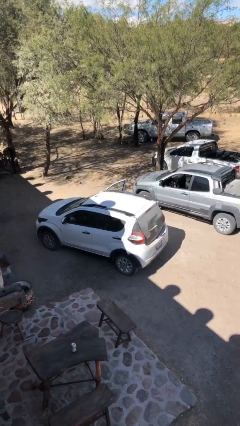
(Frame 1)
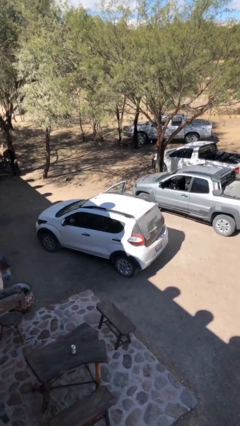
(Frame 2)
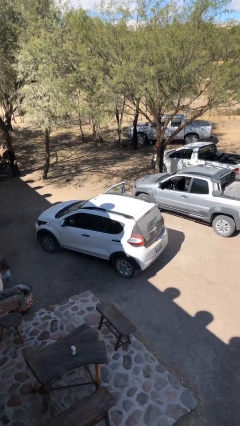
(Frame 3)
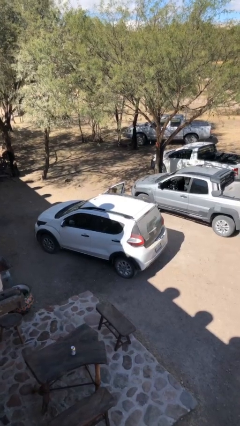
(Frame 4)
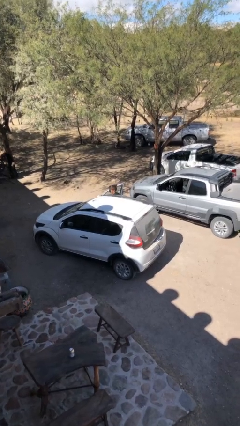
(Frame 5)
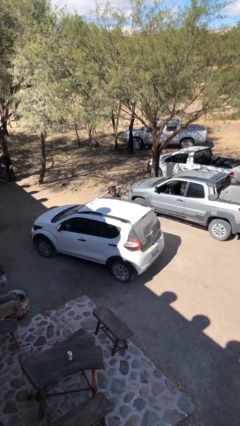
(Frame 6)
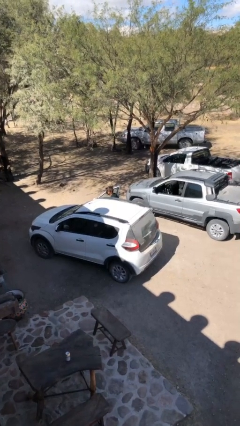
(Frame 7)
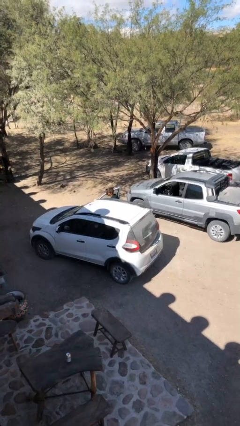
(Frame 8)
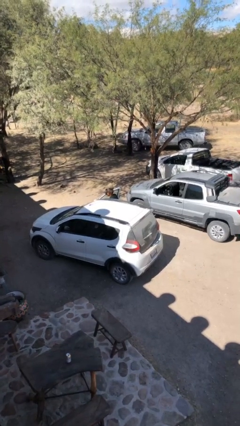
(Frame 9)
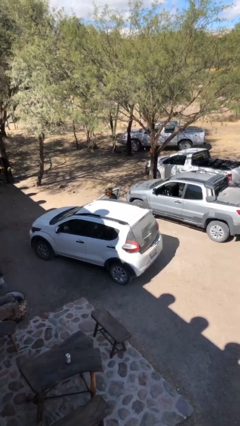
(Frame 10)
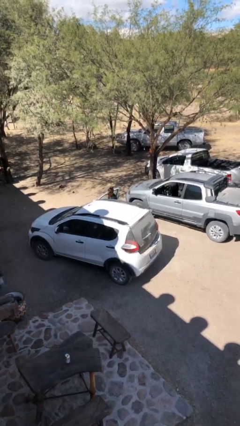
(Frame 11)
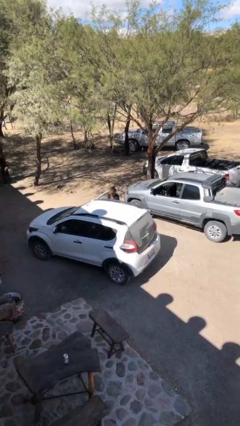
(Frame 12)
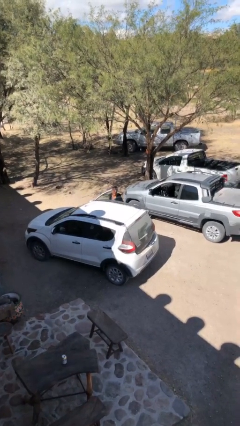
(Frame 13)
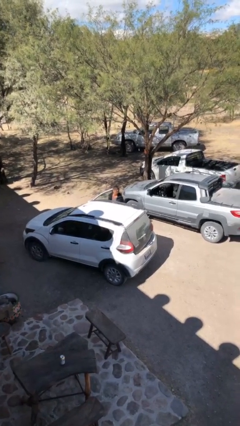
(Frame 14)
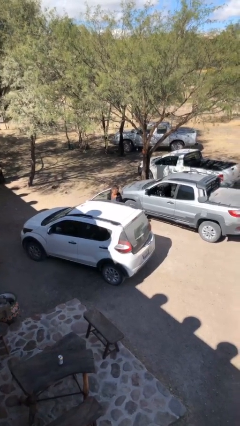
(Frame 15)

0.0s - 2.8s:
person exits car

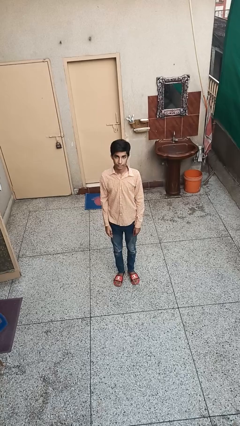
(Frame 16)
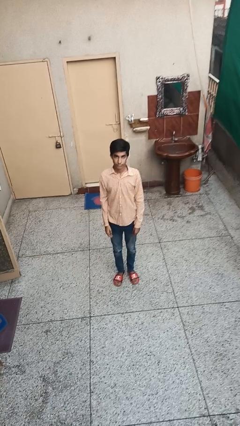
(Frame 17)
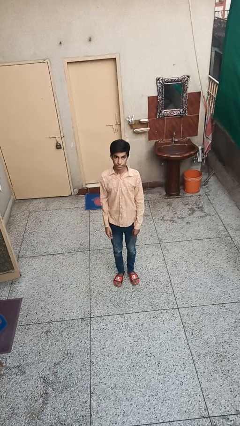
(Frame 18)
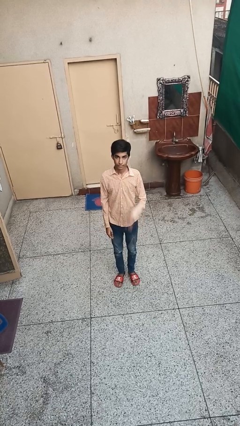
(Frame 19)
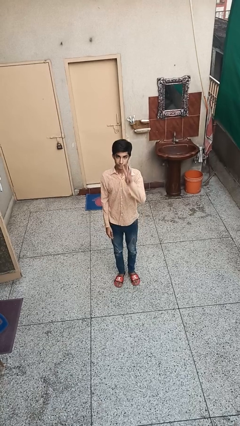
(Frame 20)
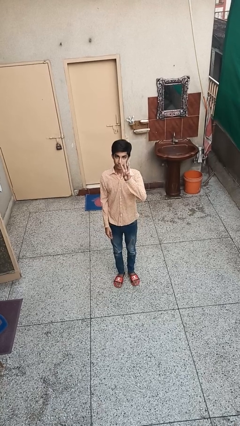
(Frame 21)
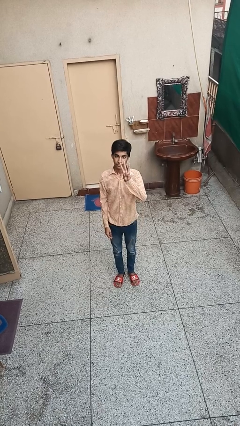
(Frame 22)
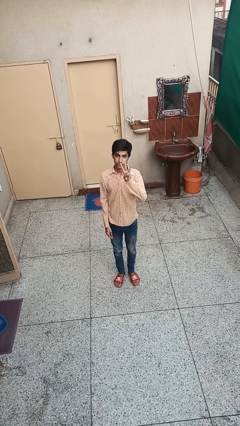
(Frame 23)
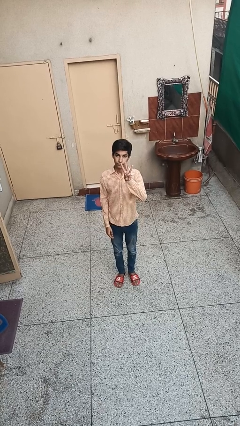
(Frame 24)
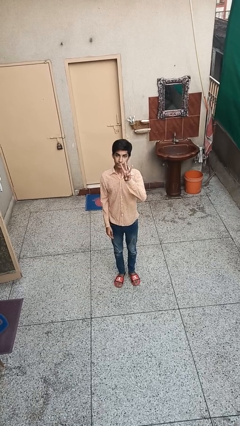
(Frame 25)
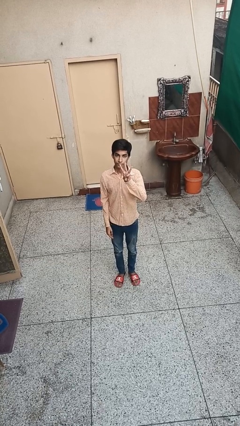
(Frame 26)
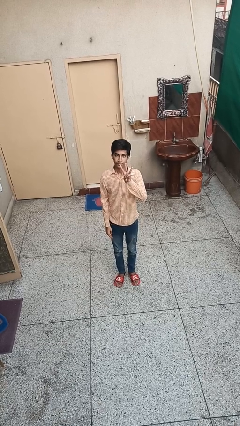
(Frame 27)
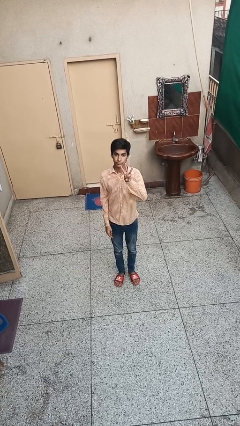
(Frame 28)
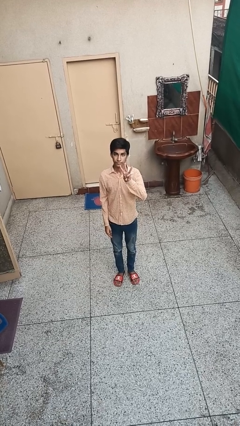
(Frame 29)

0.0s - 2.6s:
person gestures number three

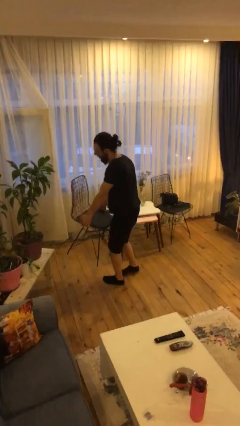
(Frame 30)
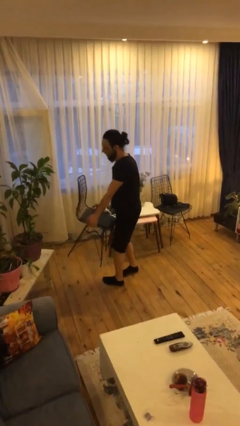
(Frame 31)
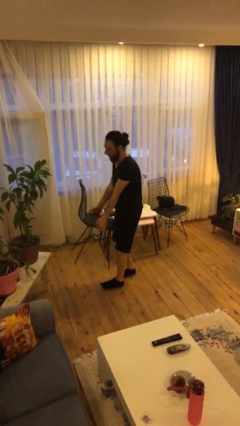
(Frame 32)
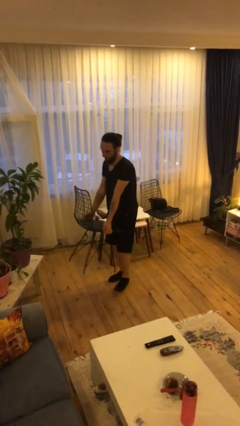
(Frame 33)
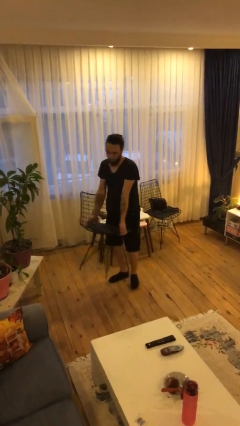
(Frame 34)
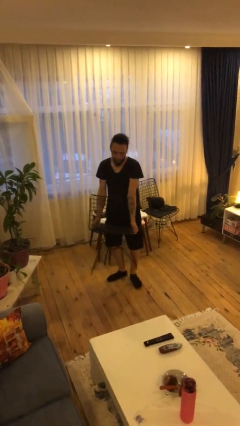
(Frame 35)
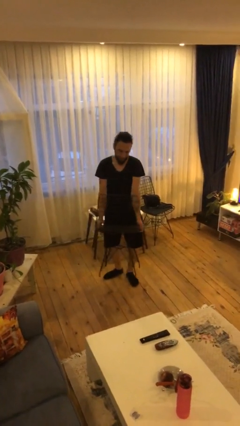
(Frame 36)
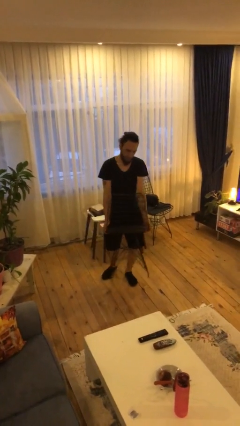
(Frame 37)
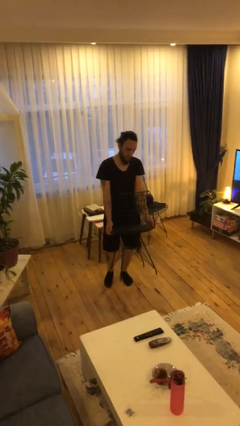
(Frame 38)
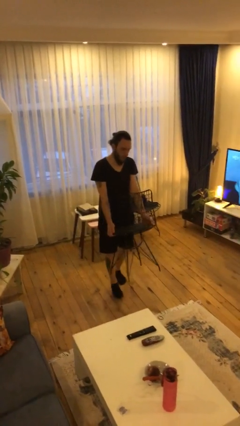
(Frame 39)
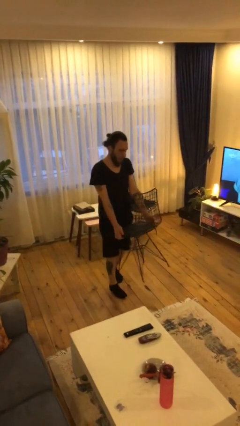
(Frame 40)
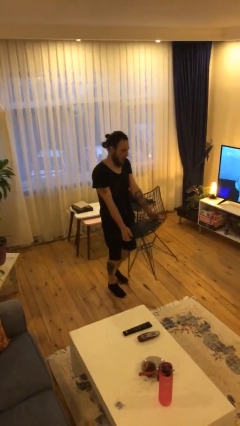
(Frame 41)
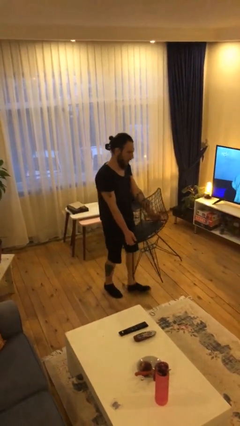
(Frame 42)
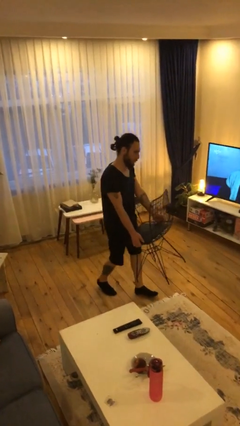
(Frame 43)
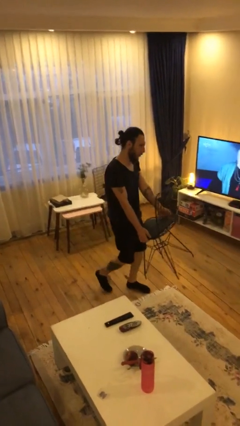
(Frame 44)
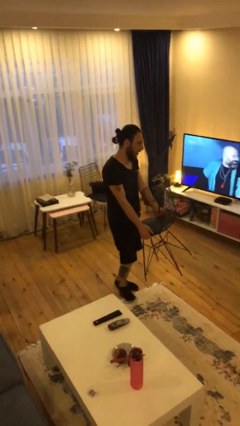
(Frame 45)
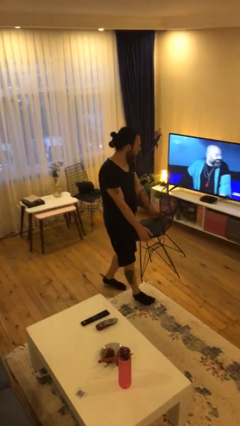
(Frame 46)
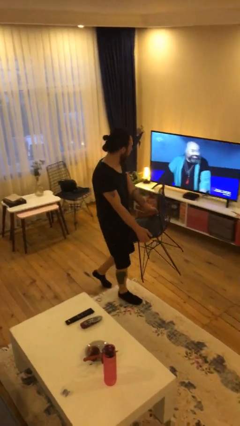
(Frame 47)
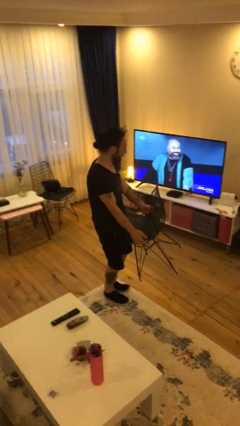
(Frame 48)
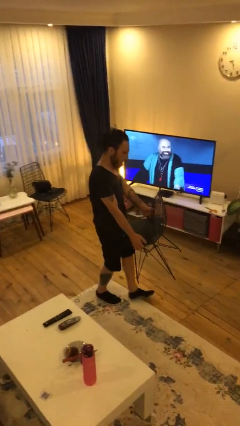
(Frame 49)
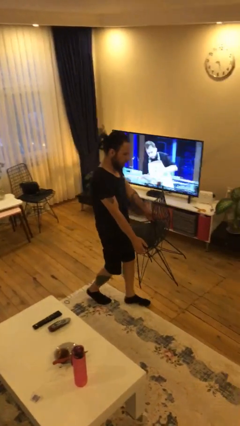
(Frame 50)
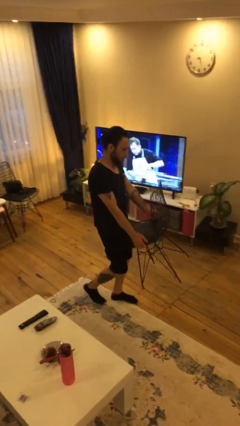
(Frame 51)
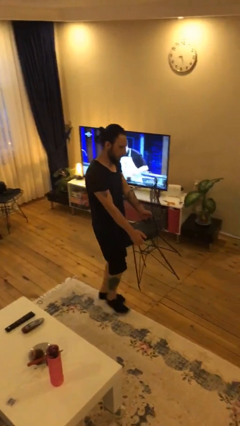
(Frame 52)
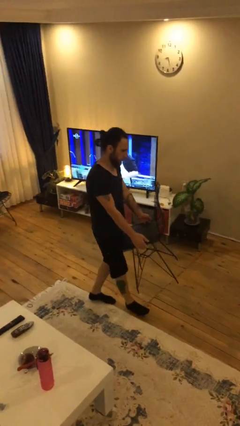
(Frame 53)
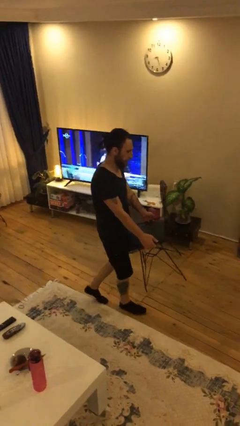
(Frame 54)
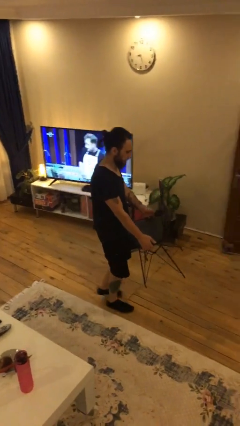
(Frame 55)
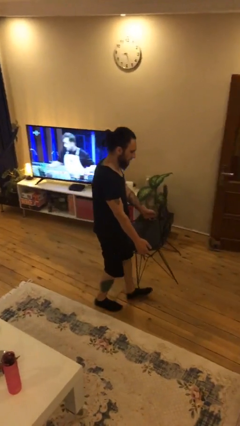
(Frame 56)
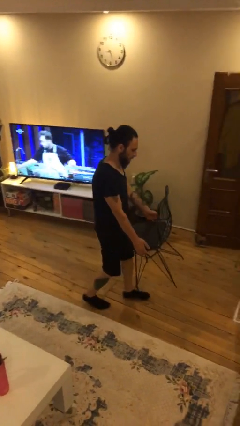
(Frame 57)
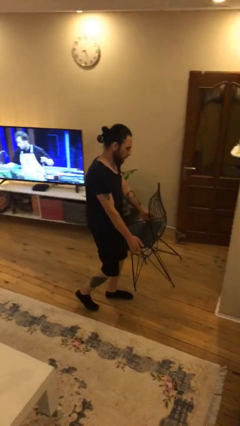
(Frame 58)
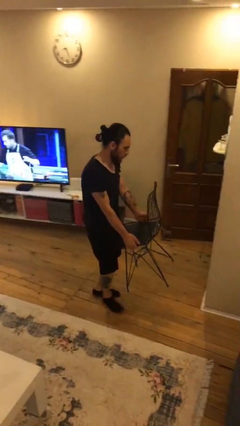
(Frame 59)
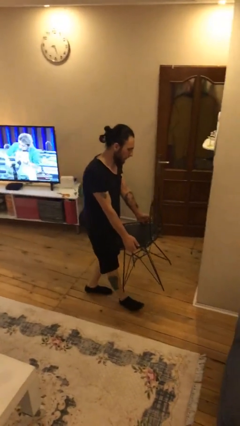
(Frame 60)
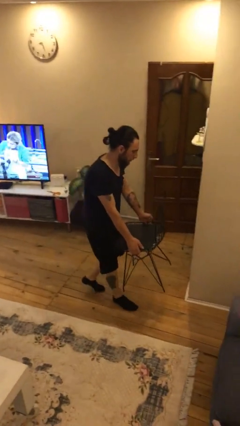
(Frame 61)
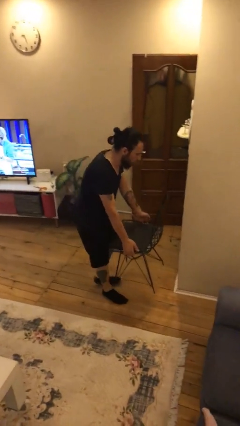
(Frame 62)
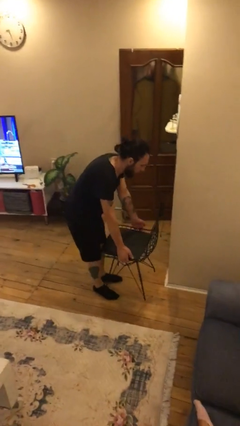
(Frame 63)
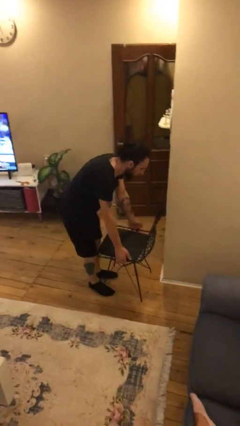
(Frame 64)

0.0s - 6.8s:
person carries heavy object

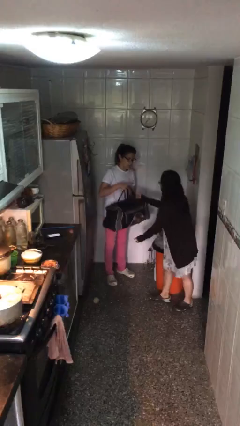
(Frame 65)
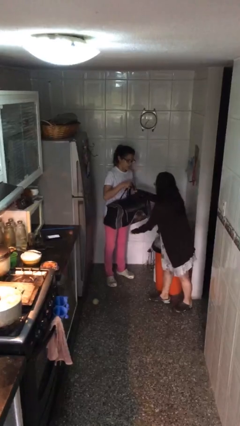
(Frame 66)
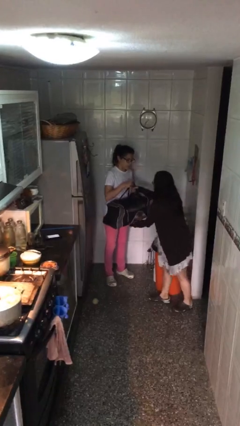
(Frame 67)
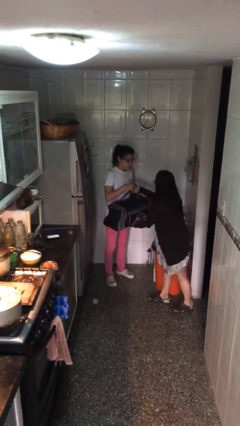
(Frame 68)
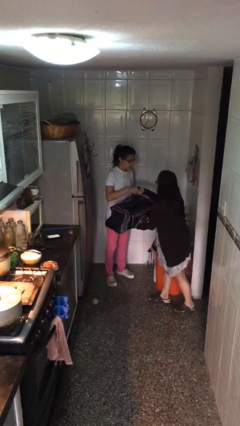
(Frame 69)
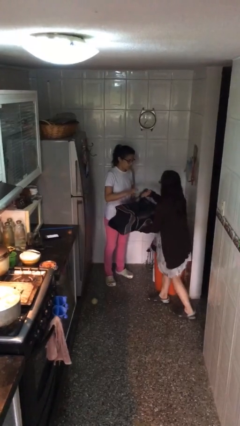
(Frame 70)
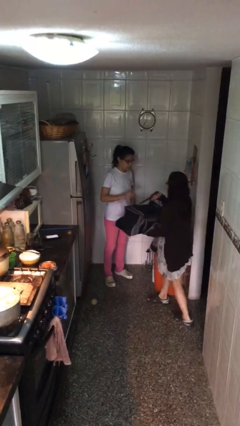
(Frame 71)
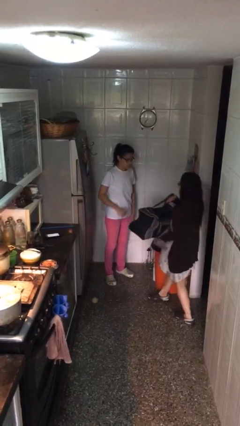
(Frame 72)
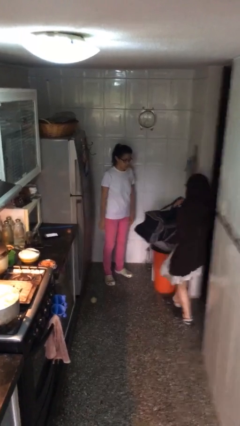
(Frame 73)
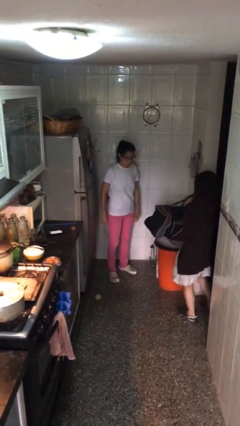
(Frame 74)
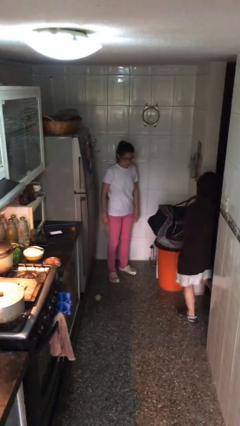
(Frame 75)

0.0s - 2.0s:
person transfers object to person

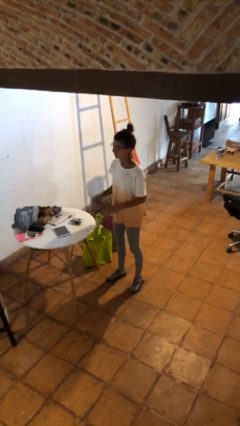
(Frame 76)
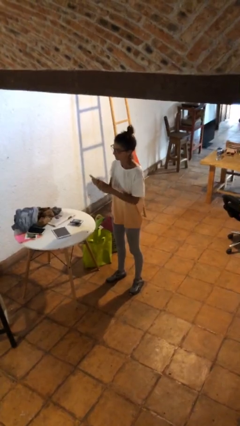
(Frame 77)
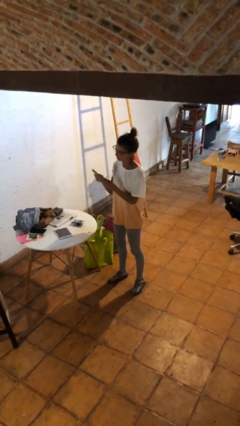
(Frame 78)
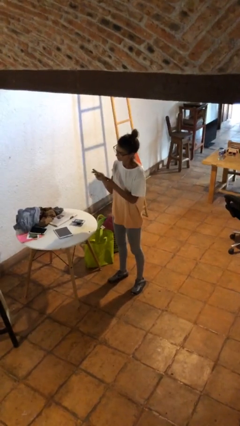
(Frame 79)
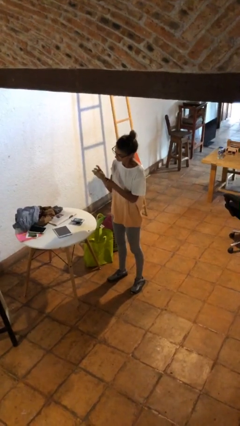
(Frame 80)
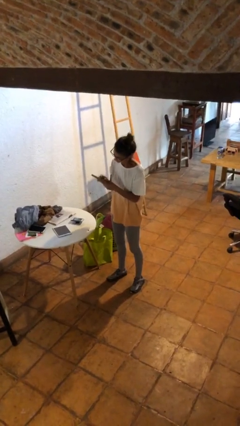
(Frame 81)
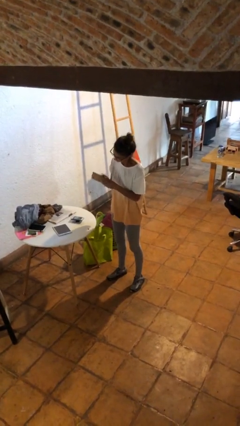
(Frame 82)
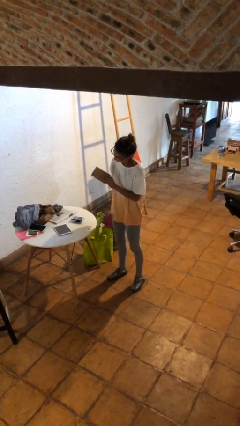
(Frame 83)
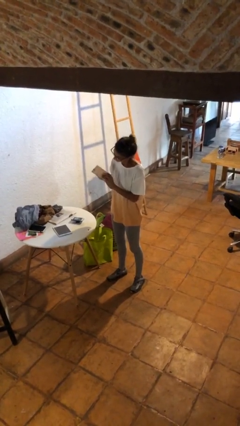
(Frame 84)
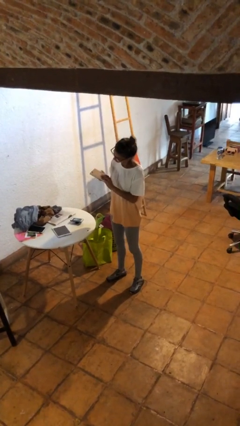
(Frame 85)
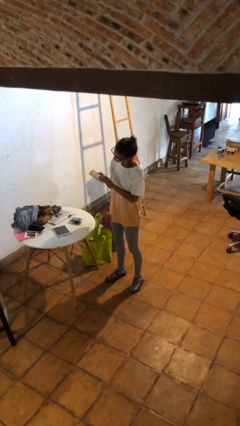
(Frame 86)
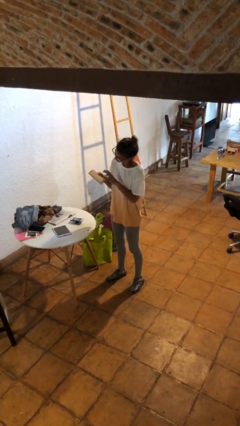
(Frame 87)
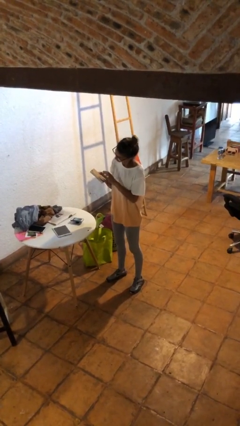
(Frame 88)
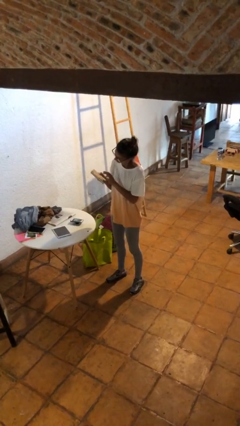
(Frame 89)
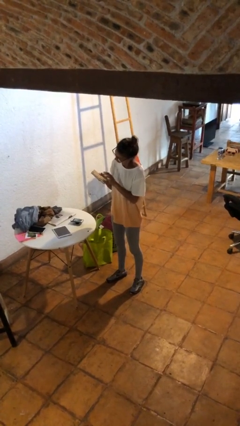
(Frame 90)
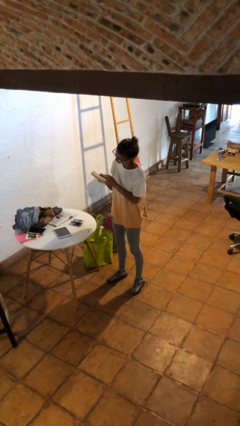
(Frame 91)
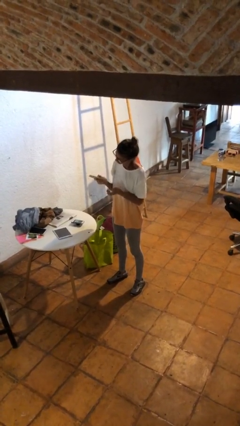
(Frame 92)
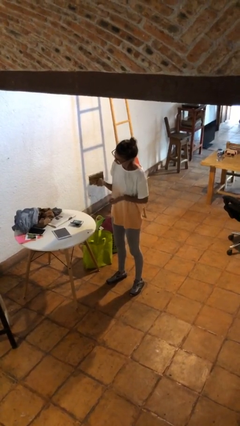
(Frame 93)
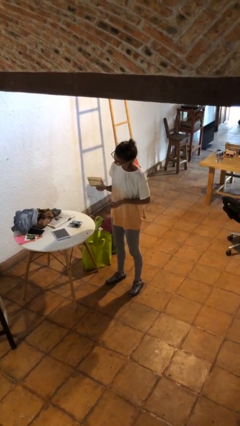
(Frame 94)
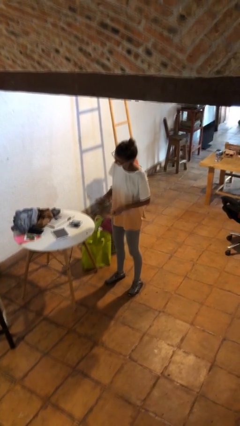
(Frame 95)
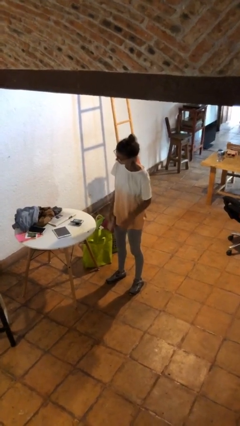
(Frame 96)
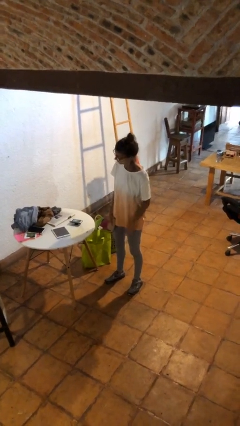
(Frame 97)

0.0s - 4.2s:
person taps object with finger
